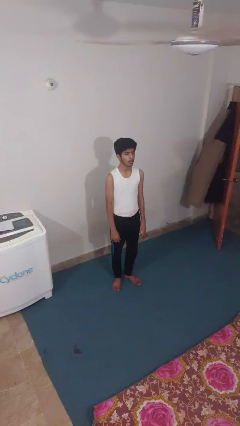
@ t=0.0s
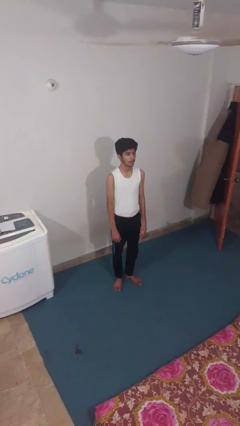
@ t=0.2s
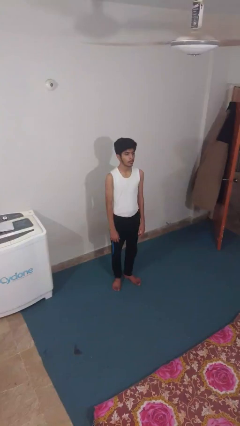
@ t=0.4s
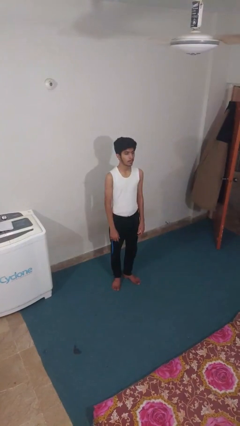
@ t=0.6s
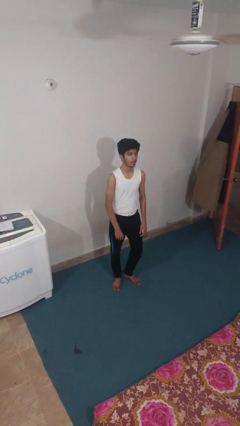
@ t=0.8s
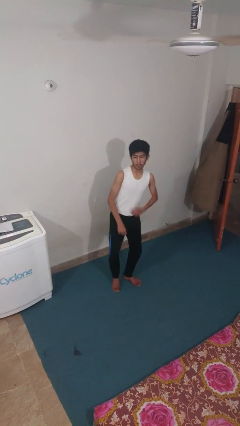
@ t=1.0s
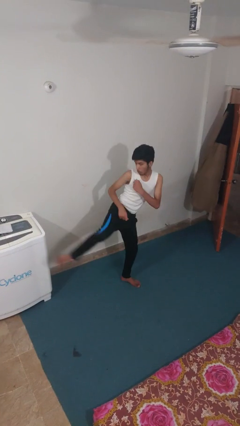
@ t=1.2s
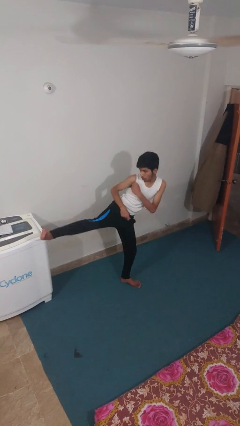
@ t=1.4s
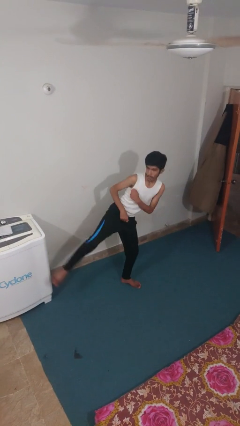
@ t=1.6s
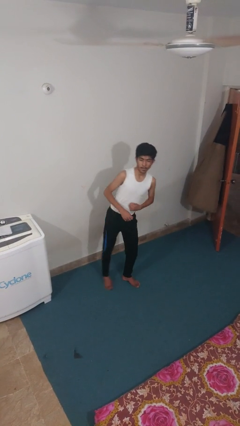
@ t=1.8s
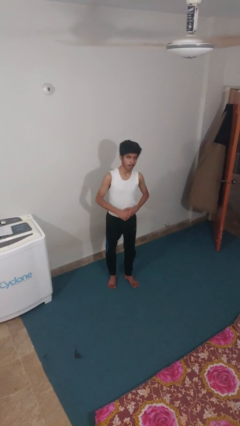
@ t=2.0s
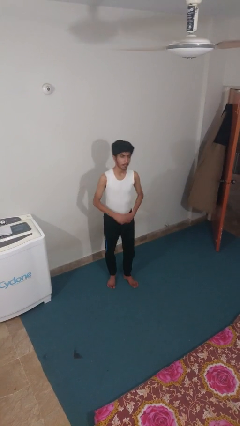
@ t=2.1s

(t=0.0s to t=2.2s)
person karate kicks

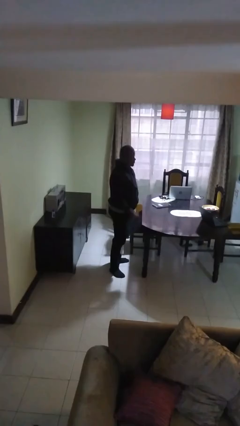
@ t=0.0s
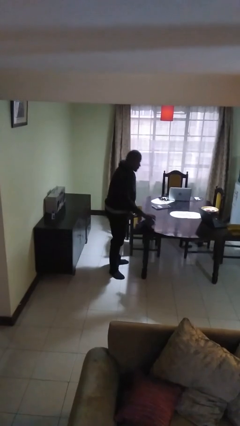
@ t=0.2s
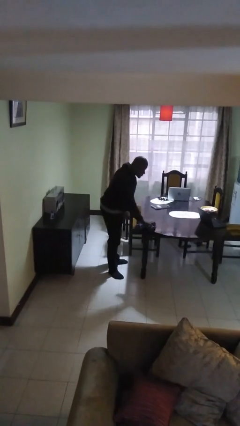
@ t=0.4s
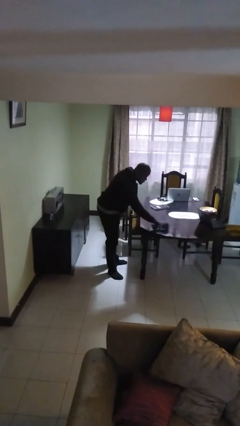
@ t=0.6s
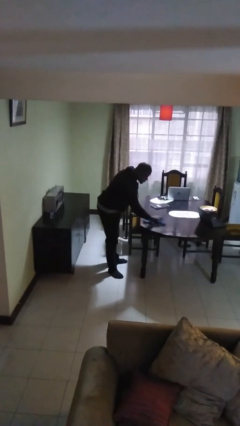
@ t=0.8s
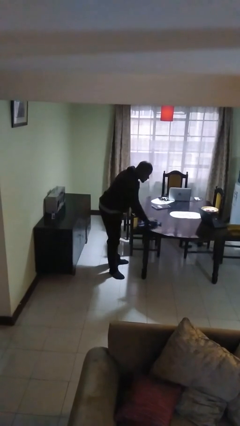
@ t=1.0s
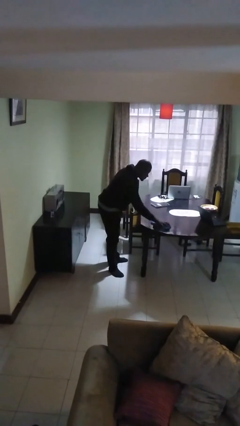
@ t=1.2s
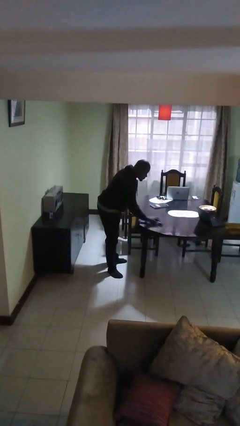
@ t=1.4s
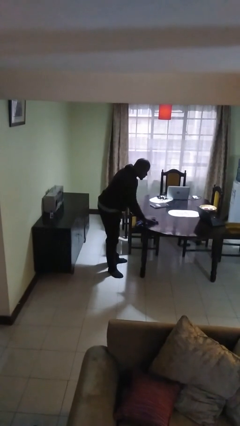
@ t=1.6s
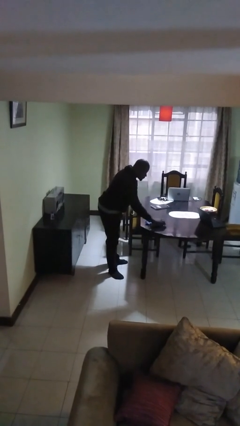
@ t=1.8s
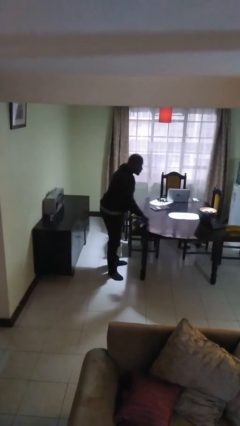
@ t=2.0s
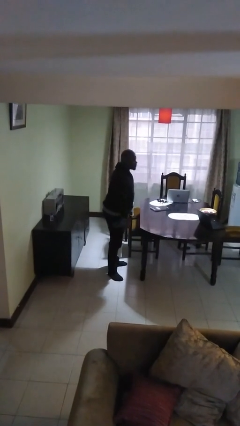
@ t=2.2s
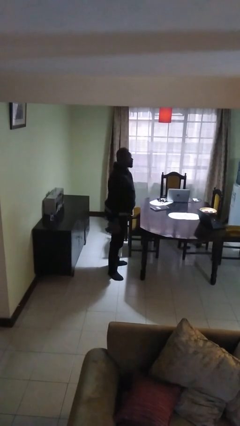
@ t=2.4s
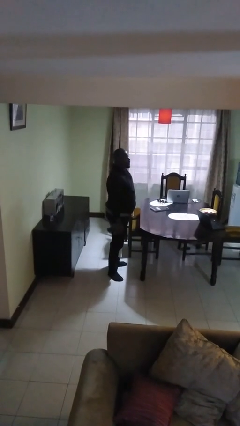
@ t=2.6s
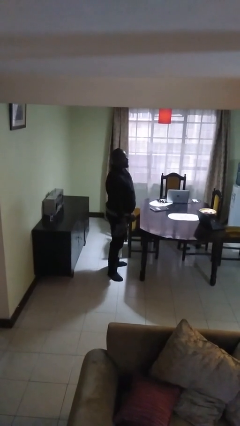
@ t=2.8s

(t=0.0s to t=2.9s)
person cleans table with rag

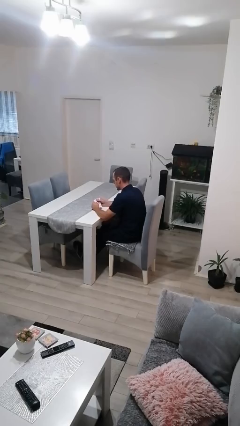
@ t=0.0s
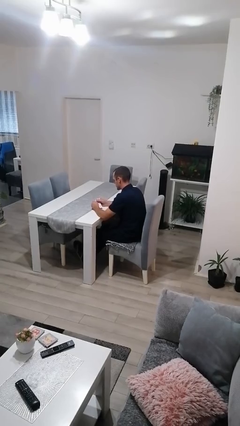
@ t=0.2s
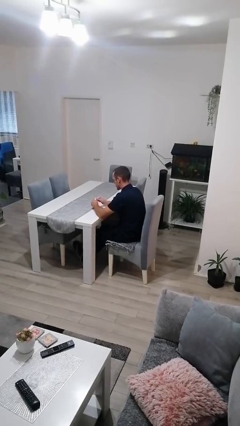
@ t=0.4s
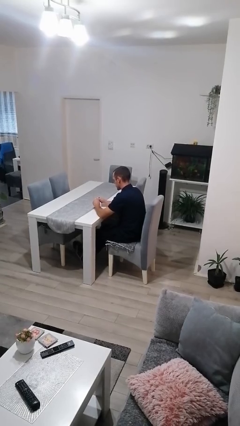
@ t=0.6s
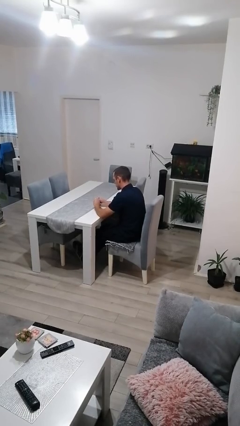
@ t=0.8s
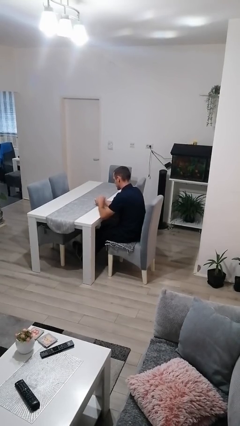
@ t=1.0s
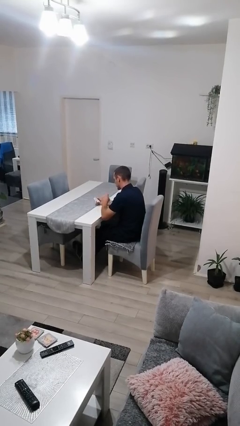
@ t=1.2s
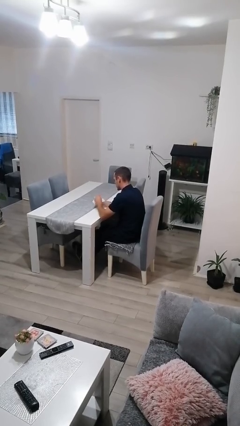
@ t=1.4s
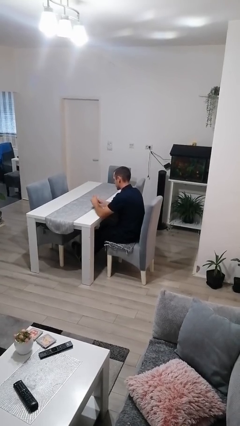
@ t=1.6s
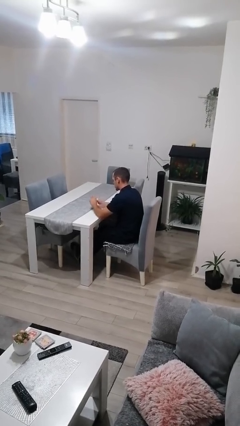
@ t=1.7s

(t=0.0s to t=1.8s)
person tears paper

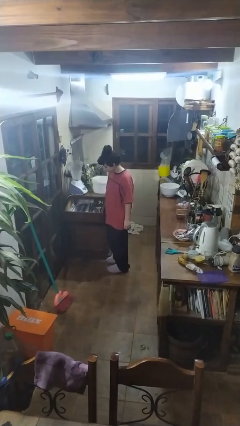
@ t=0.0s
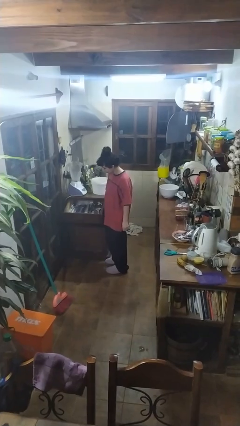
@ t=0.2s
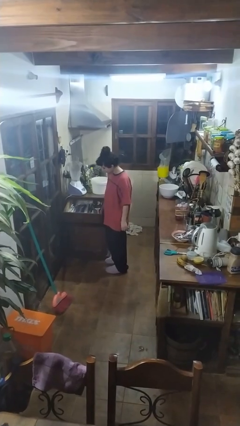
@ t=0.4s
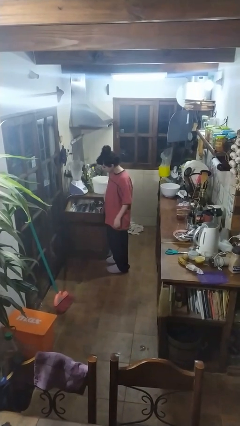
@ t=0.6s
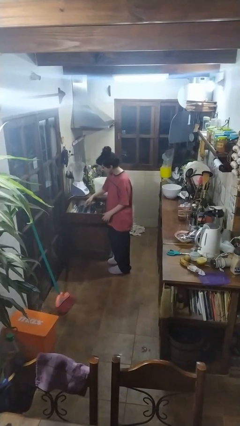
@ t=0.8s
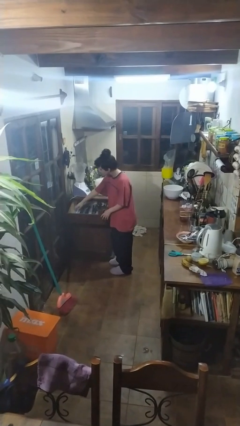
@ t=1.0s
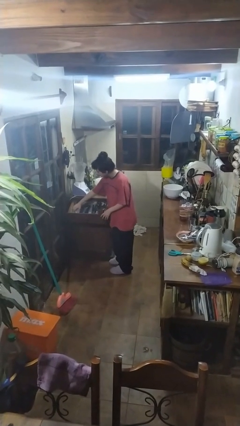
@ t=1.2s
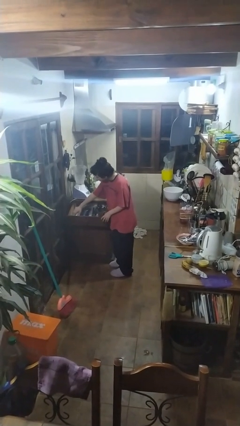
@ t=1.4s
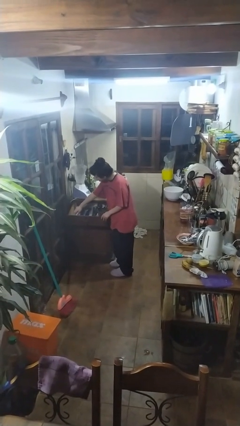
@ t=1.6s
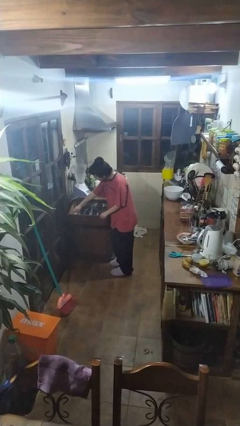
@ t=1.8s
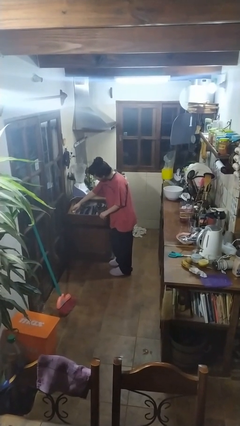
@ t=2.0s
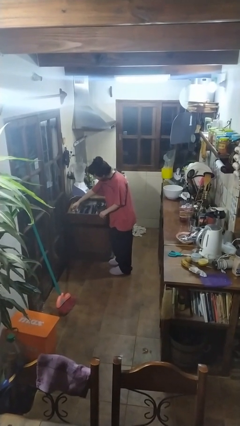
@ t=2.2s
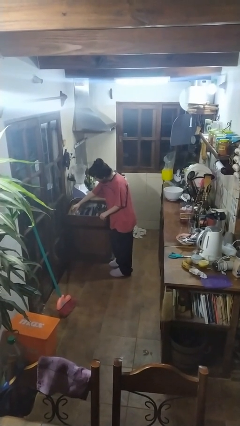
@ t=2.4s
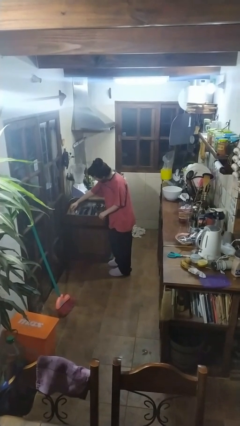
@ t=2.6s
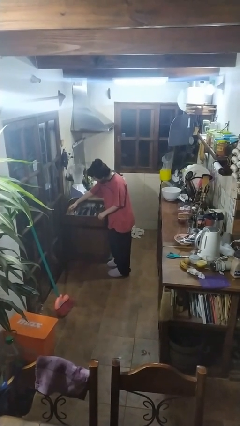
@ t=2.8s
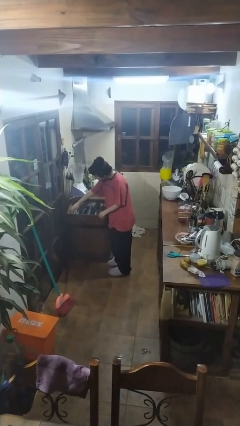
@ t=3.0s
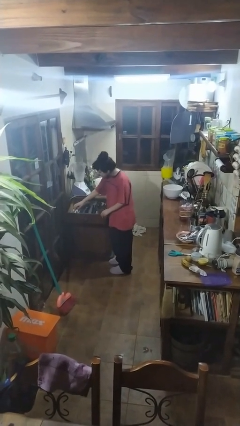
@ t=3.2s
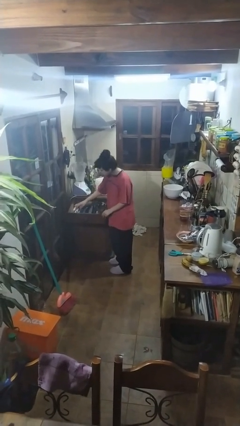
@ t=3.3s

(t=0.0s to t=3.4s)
person searches in kitchen drawer

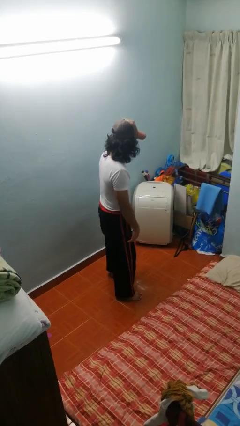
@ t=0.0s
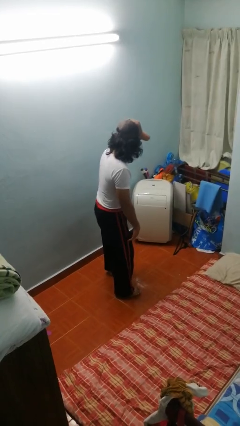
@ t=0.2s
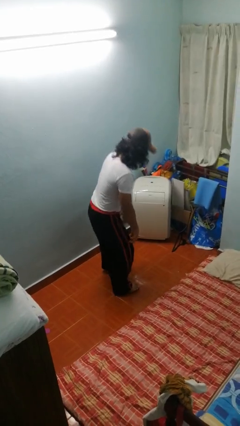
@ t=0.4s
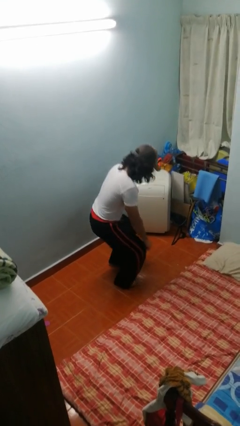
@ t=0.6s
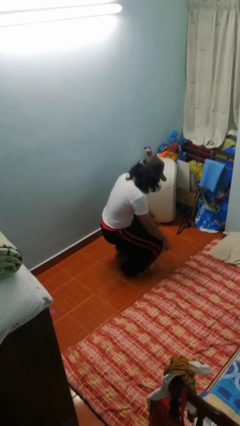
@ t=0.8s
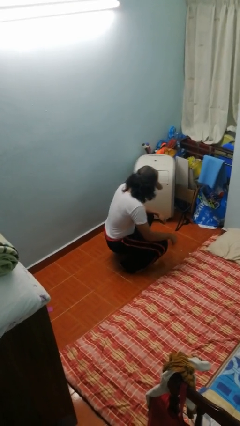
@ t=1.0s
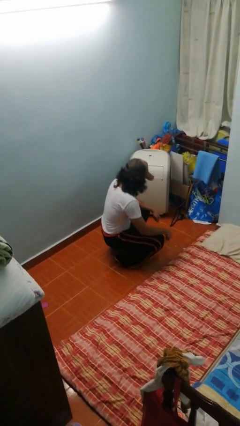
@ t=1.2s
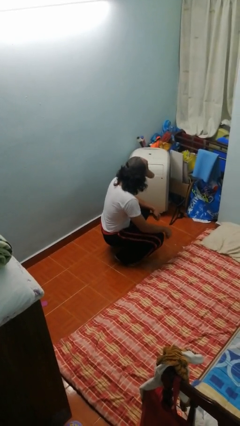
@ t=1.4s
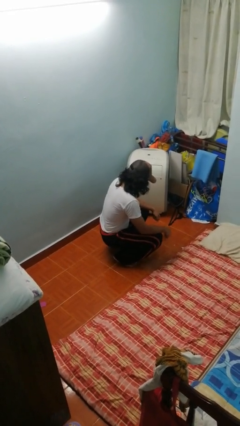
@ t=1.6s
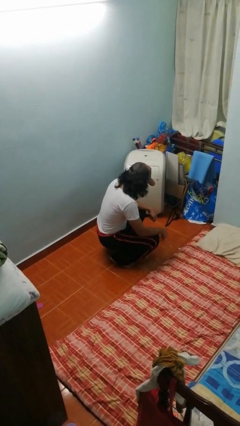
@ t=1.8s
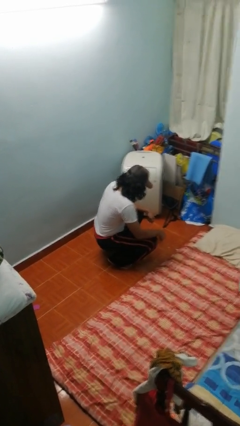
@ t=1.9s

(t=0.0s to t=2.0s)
person squats

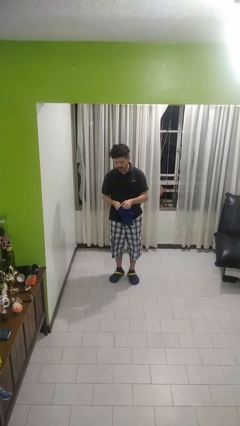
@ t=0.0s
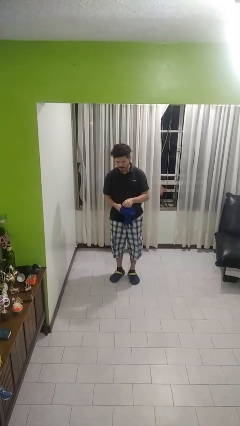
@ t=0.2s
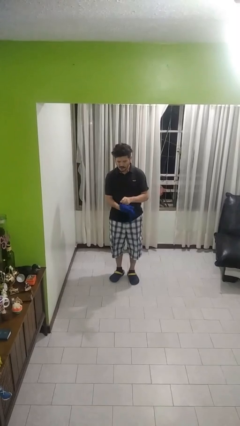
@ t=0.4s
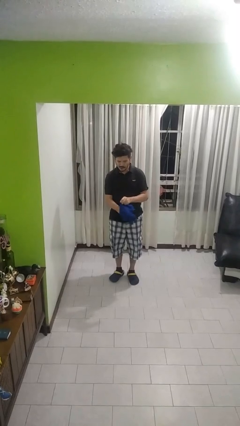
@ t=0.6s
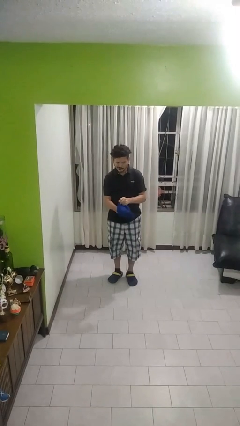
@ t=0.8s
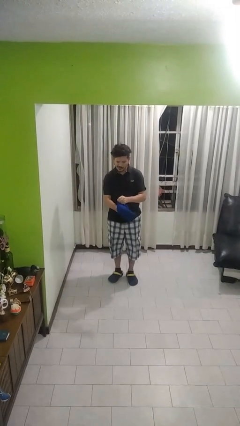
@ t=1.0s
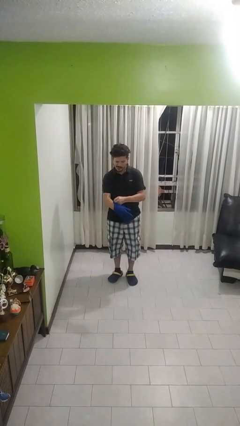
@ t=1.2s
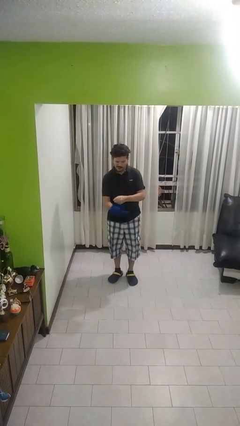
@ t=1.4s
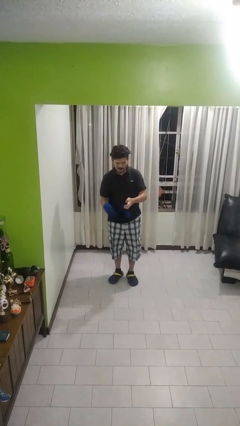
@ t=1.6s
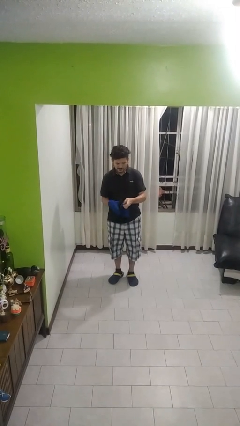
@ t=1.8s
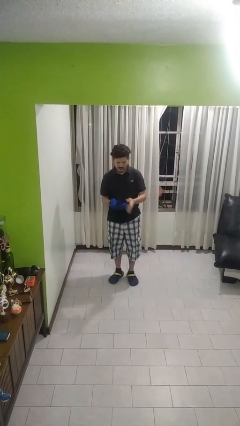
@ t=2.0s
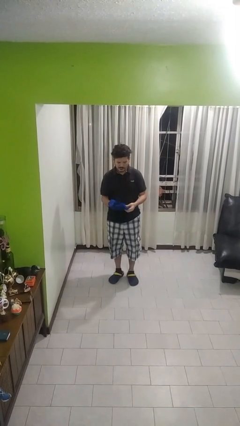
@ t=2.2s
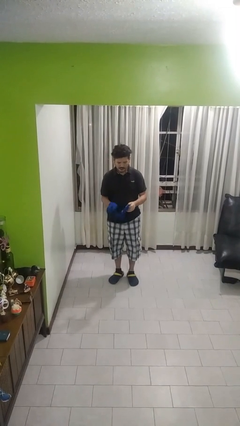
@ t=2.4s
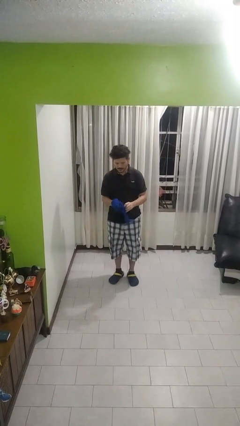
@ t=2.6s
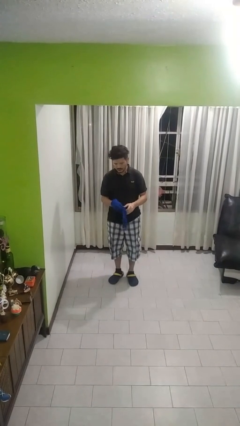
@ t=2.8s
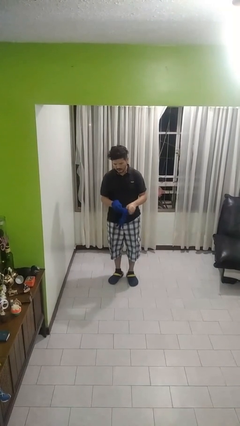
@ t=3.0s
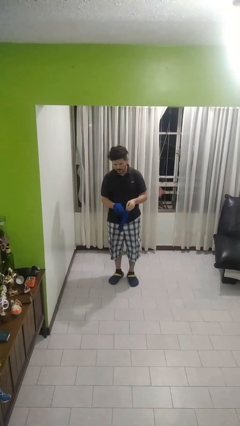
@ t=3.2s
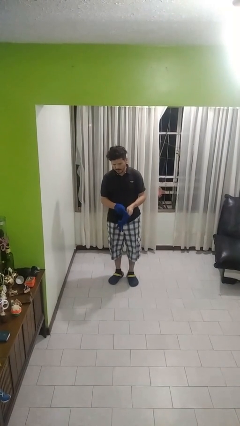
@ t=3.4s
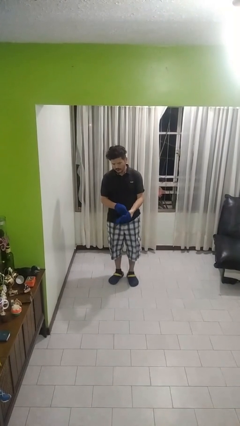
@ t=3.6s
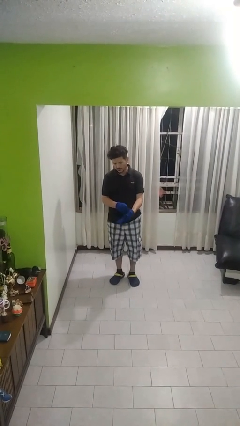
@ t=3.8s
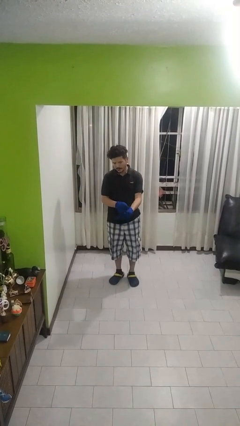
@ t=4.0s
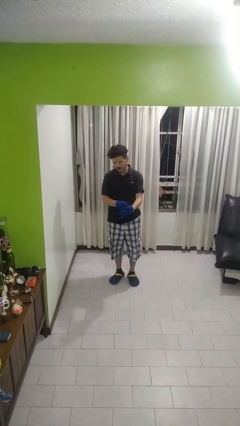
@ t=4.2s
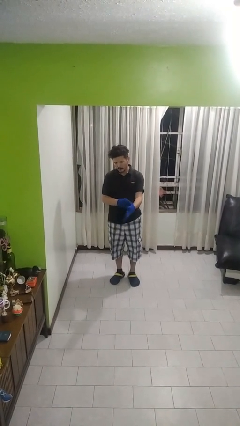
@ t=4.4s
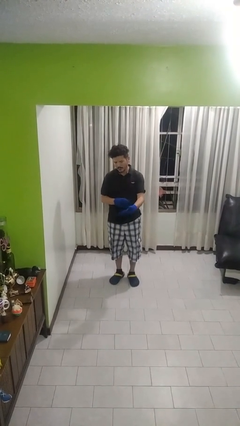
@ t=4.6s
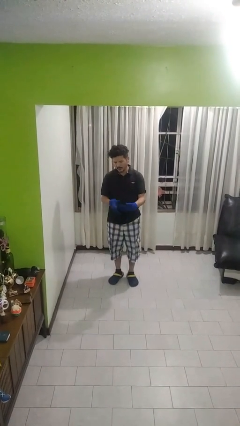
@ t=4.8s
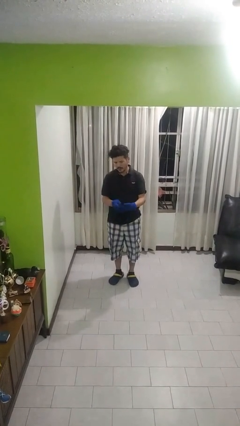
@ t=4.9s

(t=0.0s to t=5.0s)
person puts on gloves
